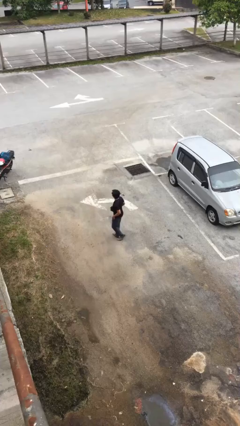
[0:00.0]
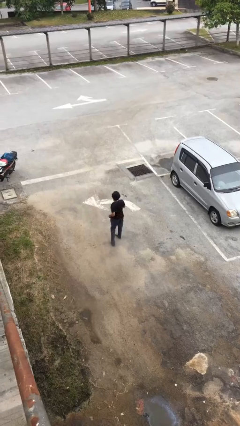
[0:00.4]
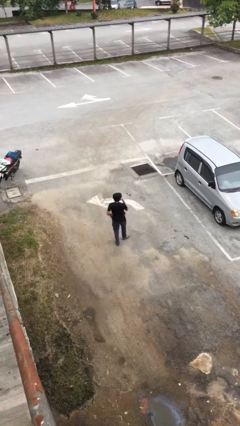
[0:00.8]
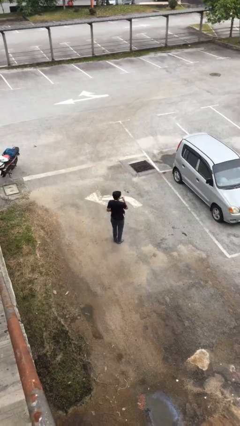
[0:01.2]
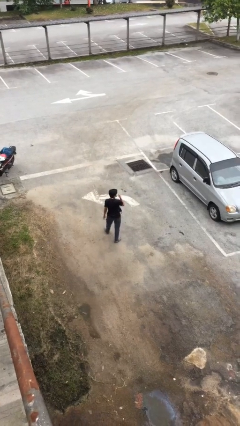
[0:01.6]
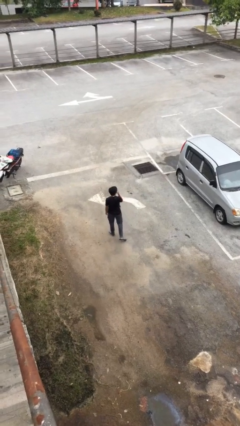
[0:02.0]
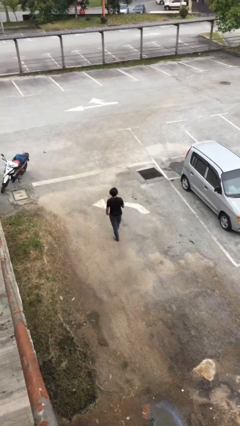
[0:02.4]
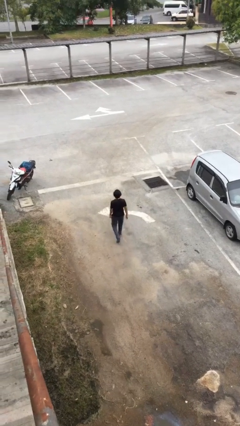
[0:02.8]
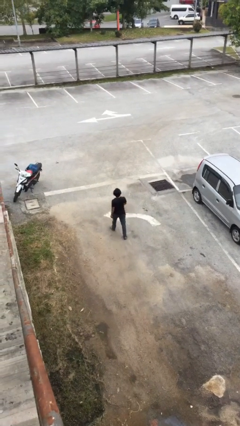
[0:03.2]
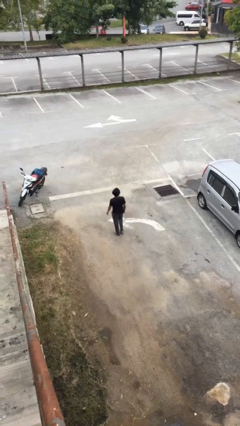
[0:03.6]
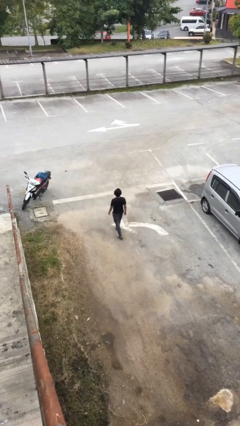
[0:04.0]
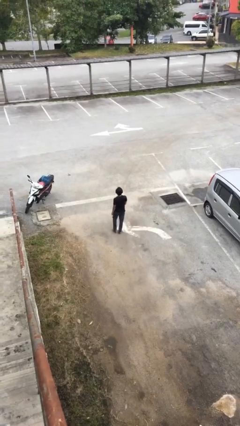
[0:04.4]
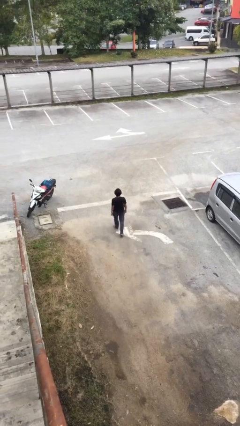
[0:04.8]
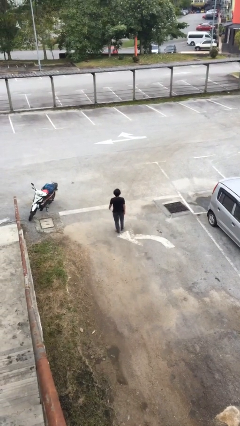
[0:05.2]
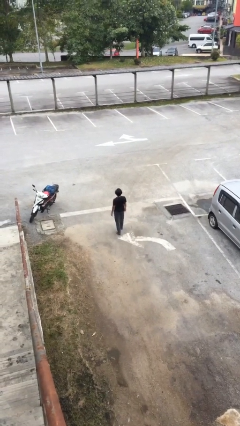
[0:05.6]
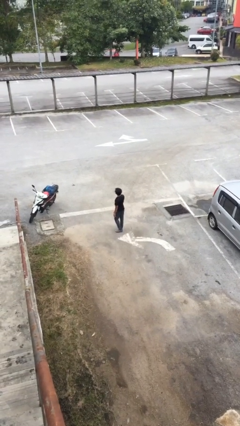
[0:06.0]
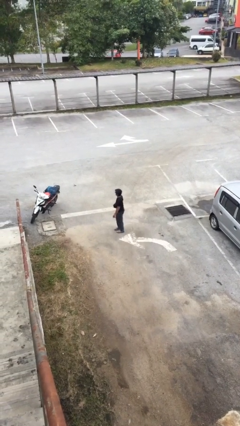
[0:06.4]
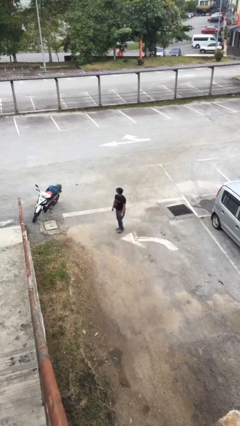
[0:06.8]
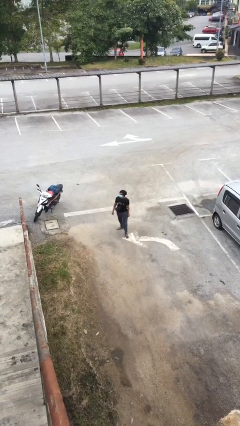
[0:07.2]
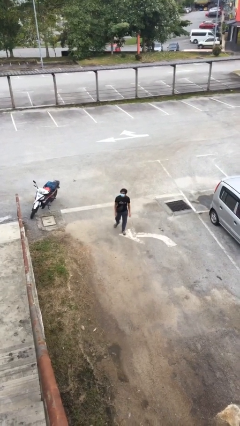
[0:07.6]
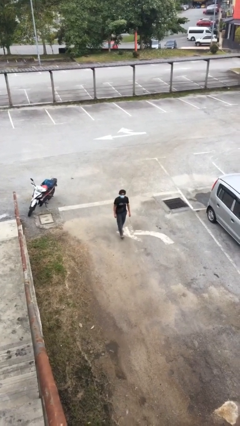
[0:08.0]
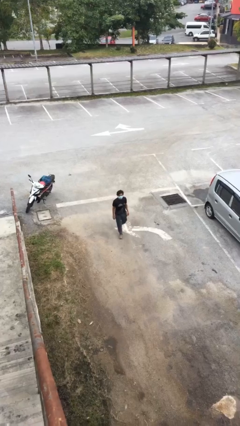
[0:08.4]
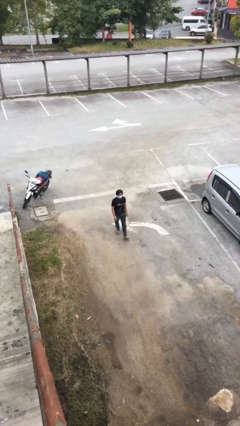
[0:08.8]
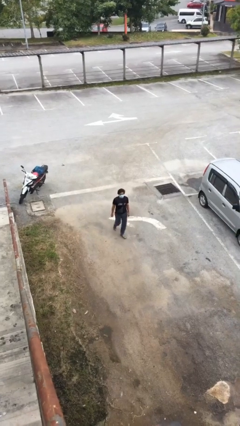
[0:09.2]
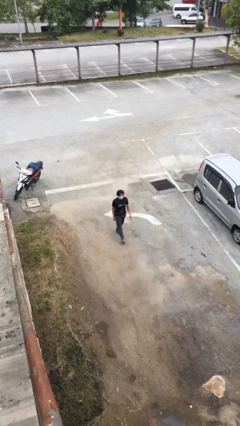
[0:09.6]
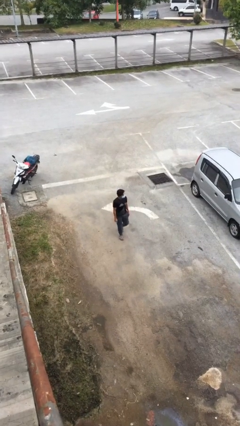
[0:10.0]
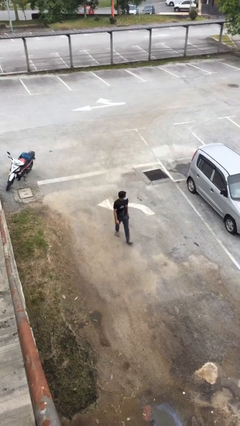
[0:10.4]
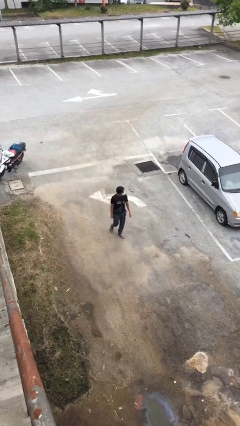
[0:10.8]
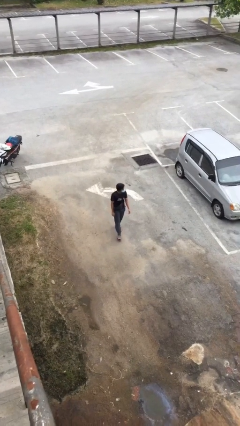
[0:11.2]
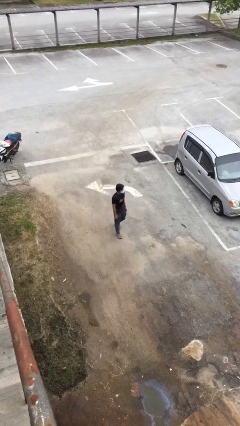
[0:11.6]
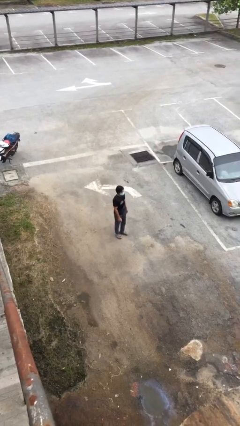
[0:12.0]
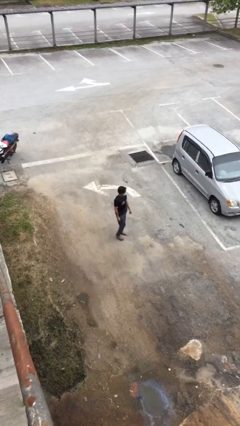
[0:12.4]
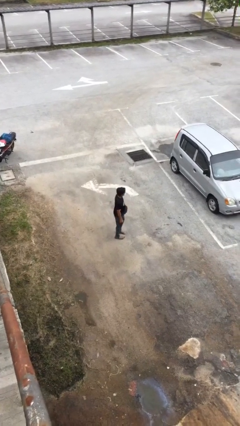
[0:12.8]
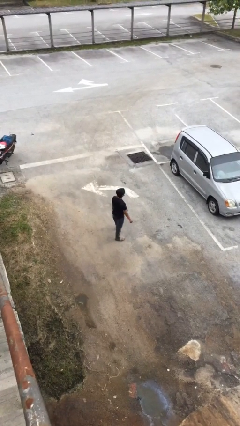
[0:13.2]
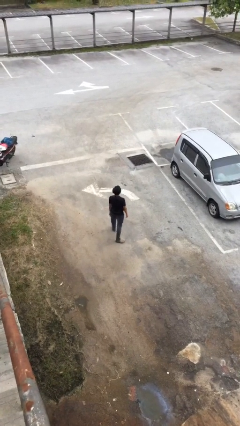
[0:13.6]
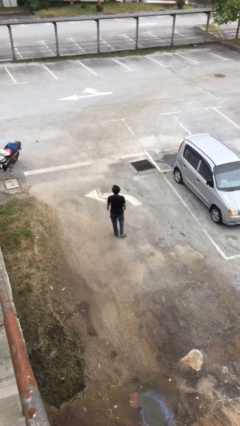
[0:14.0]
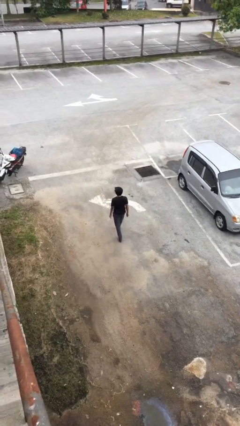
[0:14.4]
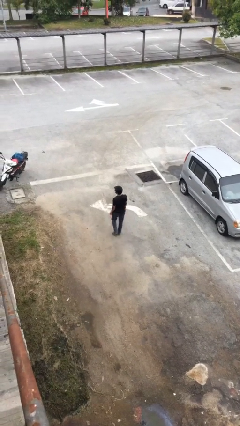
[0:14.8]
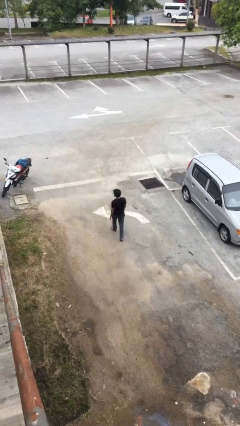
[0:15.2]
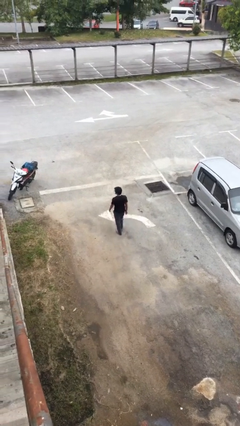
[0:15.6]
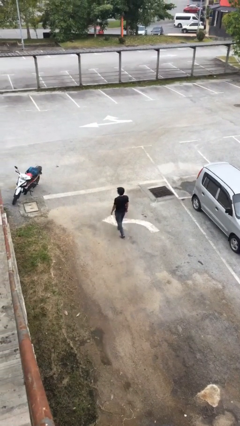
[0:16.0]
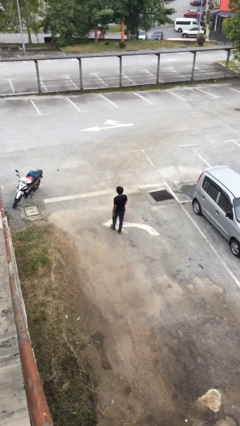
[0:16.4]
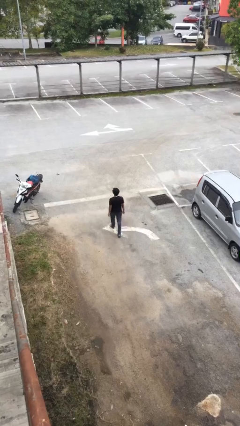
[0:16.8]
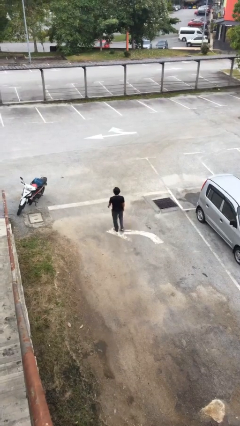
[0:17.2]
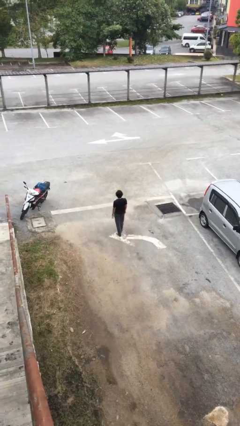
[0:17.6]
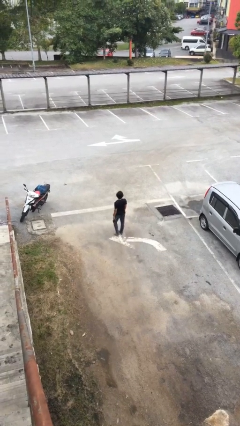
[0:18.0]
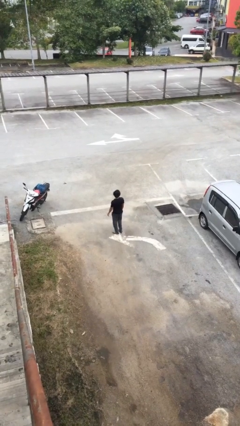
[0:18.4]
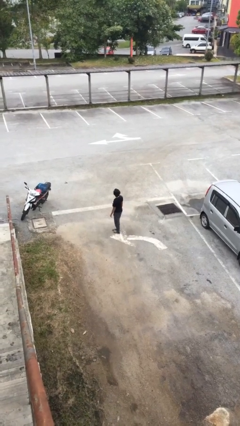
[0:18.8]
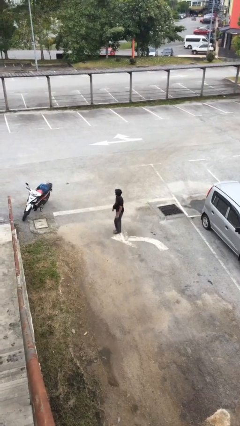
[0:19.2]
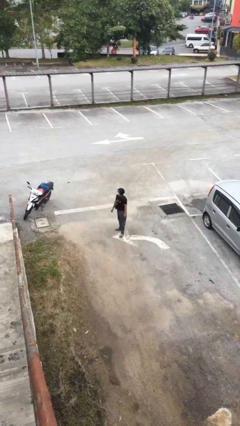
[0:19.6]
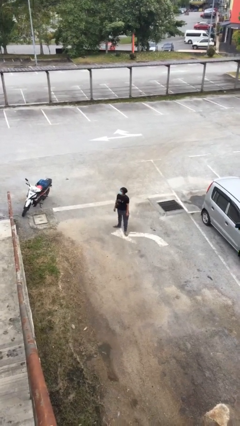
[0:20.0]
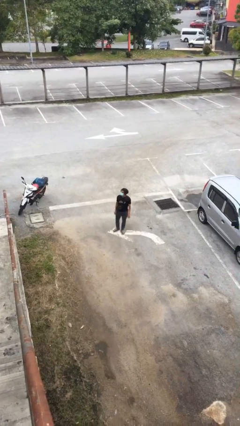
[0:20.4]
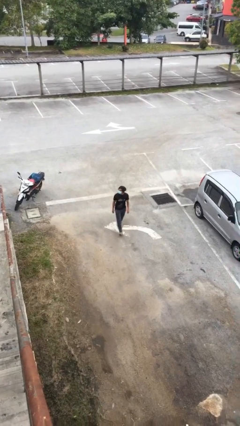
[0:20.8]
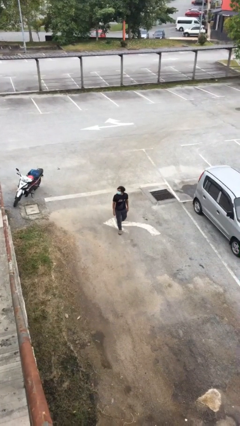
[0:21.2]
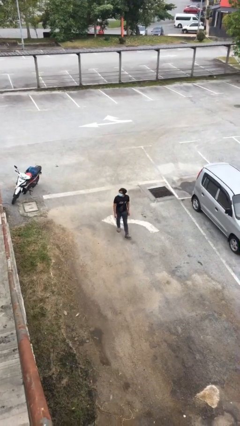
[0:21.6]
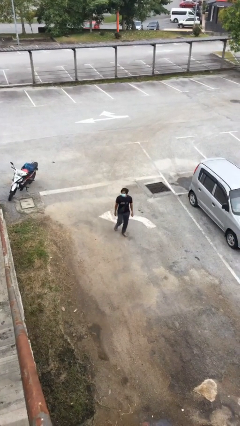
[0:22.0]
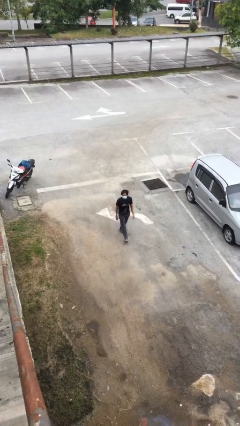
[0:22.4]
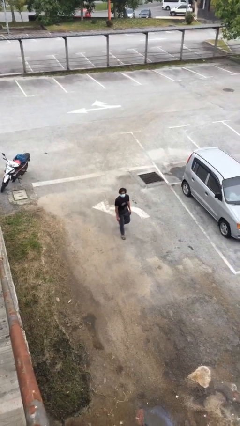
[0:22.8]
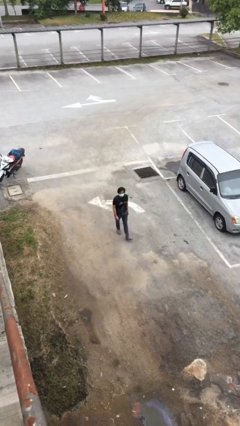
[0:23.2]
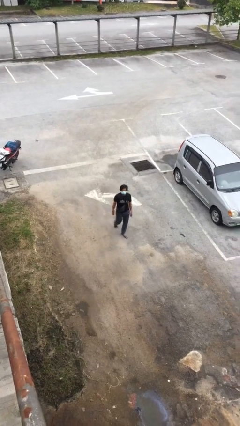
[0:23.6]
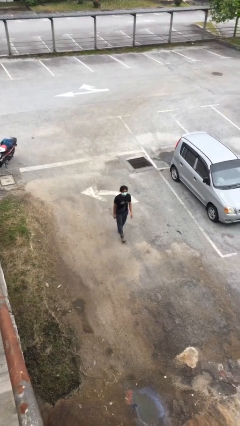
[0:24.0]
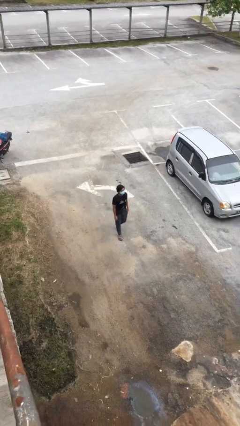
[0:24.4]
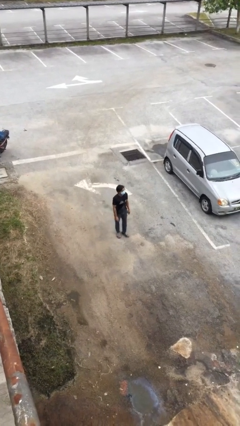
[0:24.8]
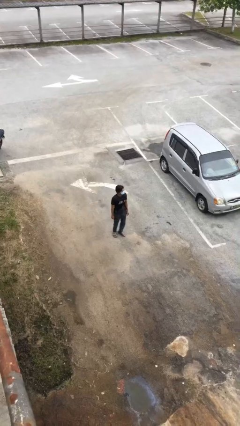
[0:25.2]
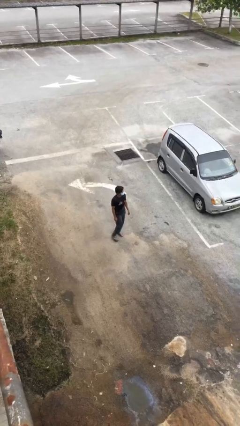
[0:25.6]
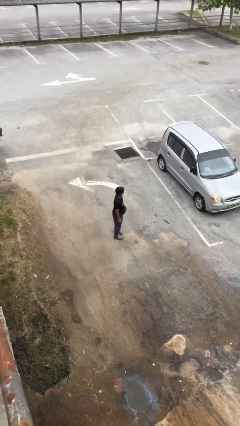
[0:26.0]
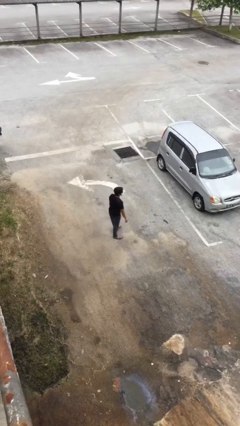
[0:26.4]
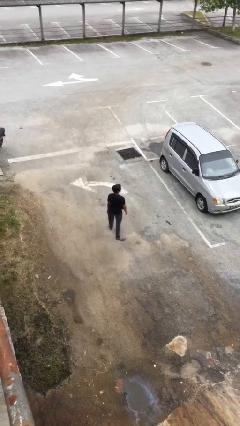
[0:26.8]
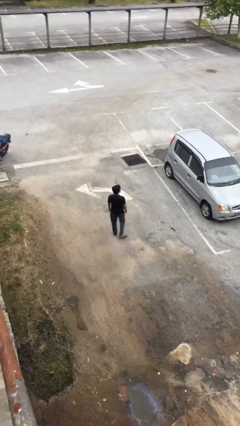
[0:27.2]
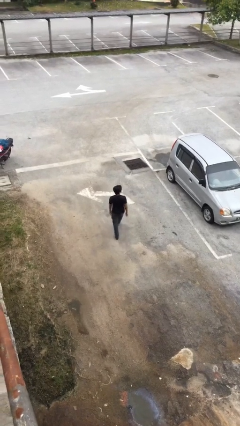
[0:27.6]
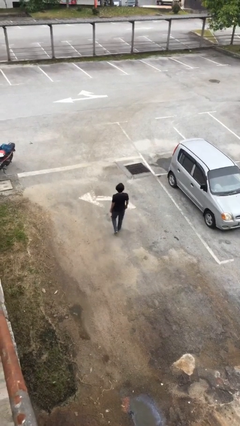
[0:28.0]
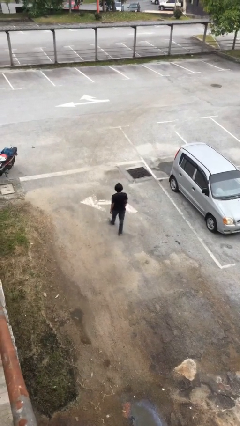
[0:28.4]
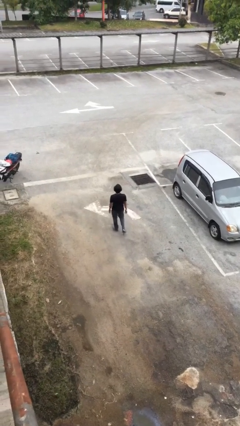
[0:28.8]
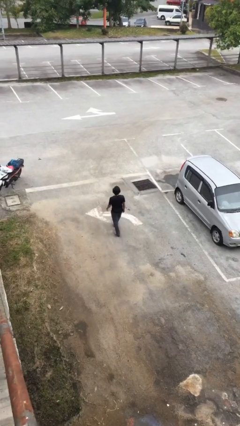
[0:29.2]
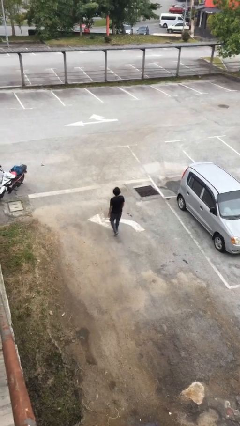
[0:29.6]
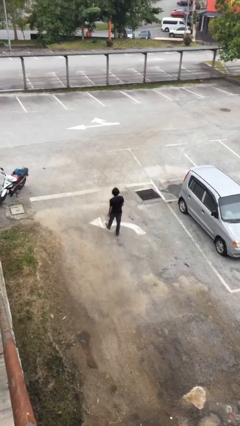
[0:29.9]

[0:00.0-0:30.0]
person walks

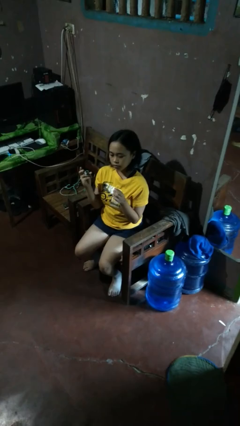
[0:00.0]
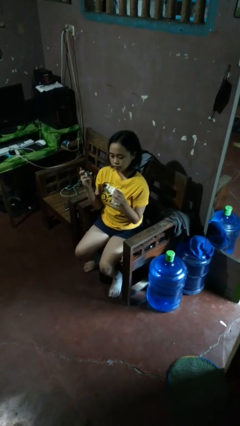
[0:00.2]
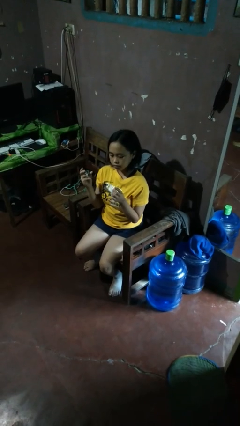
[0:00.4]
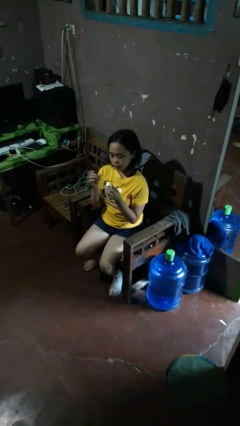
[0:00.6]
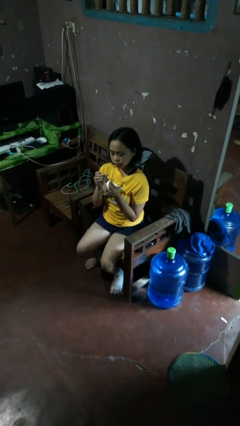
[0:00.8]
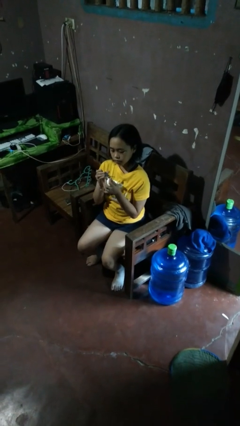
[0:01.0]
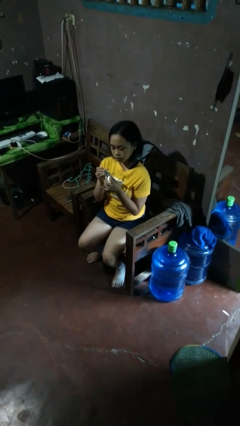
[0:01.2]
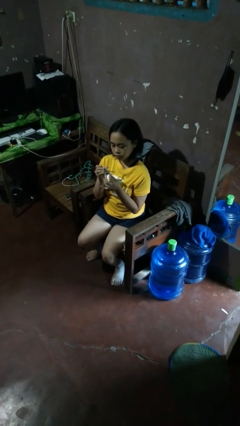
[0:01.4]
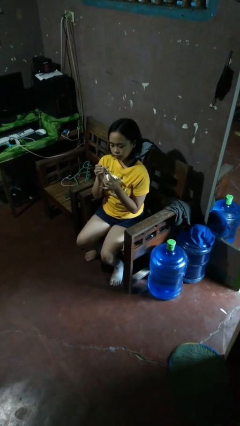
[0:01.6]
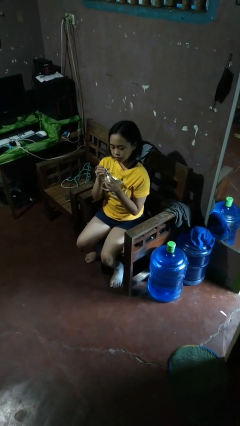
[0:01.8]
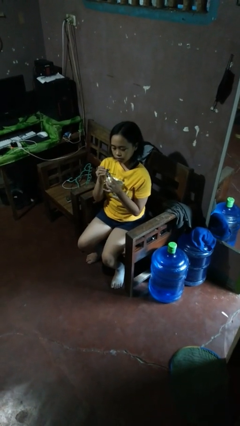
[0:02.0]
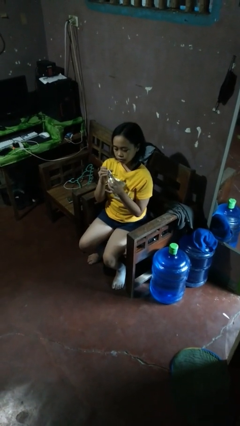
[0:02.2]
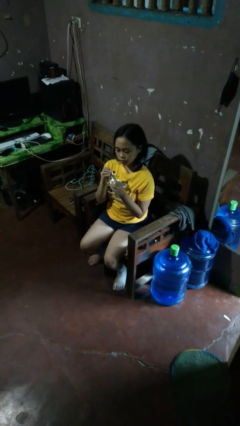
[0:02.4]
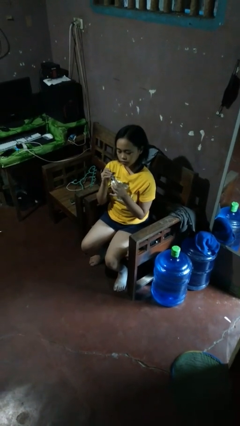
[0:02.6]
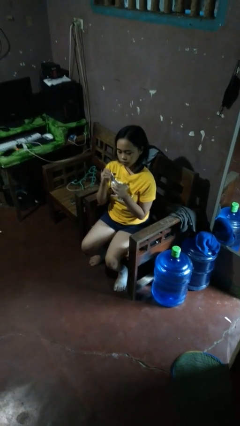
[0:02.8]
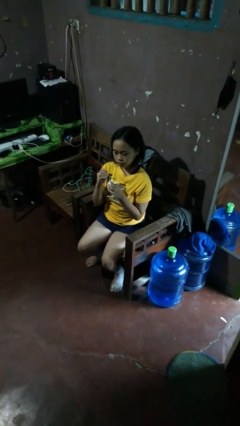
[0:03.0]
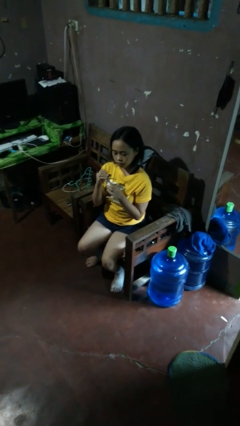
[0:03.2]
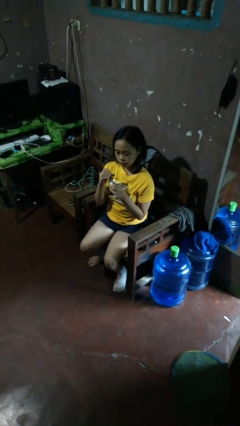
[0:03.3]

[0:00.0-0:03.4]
person clips fingernails
